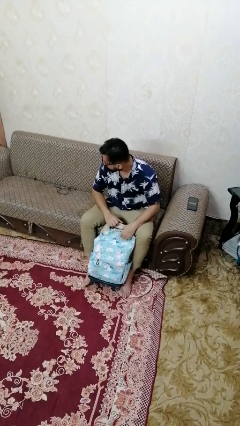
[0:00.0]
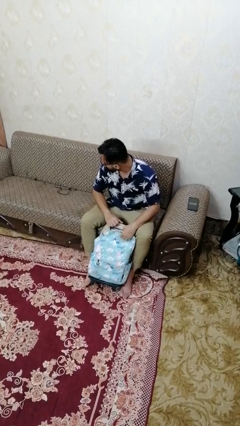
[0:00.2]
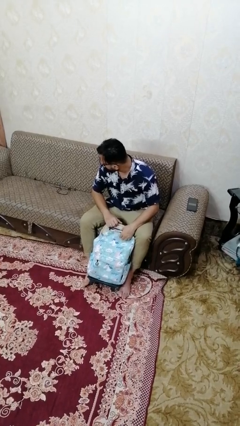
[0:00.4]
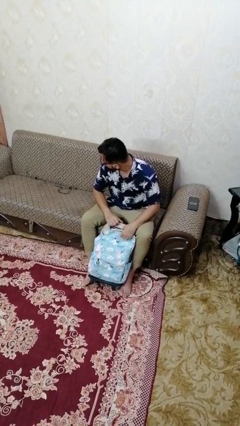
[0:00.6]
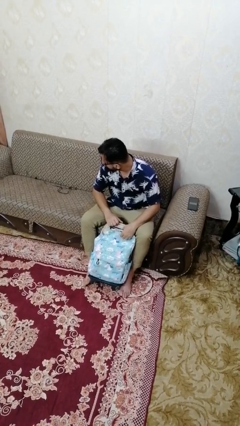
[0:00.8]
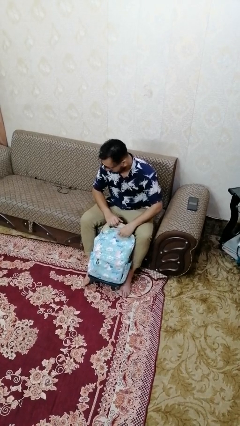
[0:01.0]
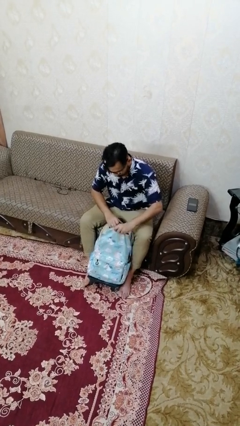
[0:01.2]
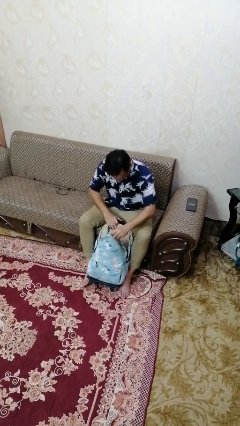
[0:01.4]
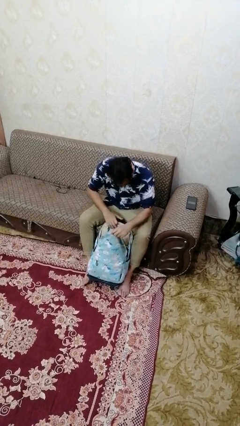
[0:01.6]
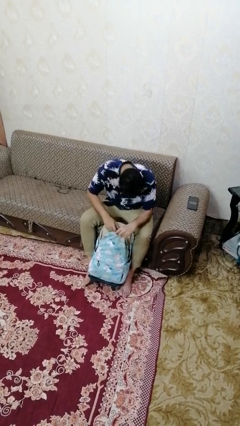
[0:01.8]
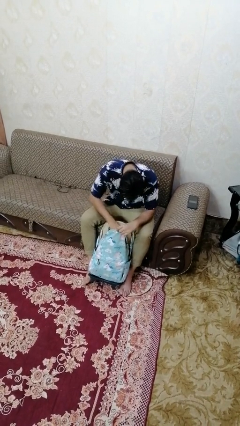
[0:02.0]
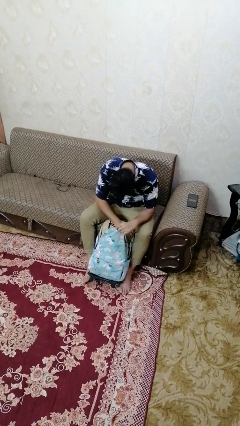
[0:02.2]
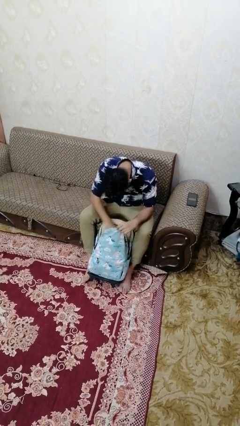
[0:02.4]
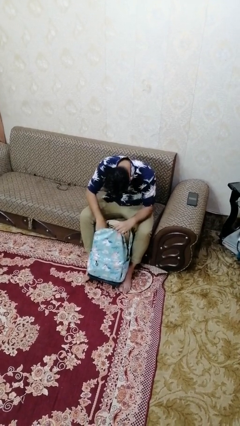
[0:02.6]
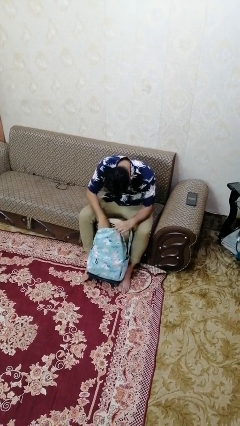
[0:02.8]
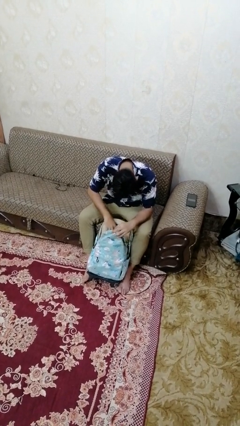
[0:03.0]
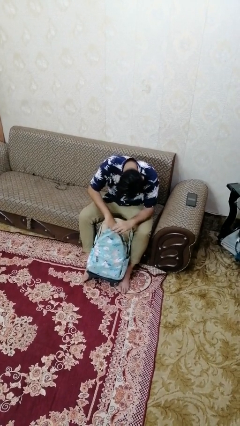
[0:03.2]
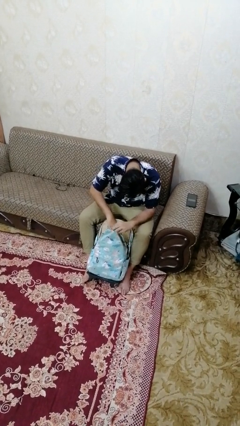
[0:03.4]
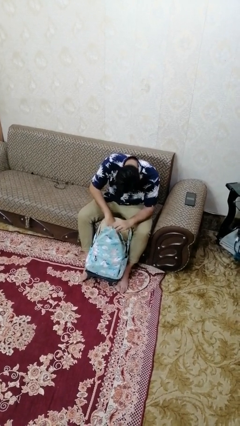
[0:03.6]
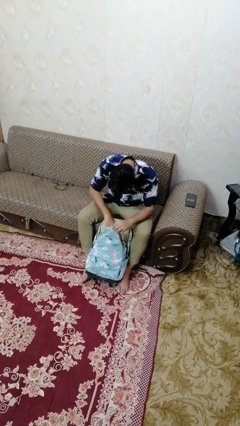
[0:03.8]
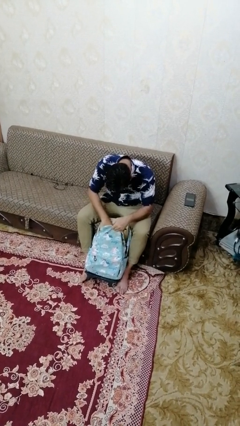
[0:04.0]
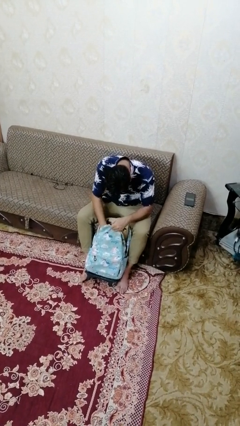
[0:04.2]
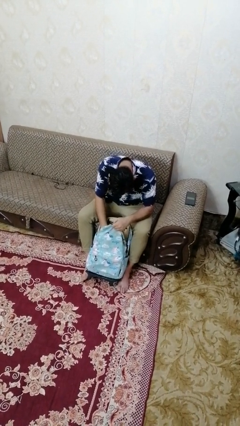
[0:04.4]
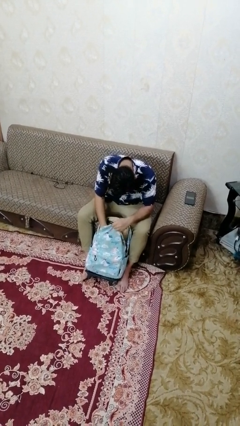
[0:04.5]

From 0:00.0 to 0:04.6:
person searches in backpack

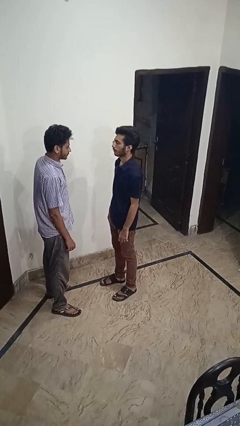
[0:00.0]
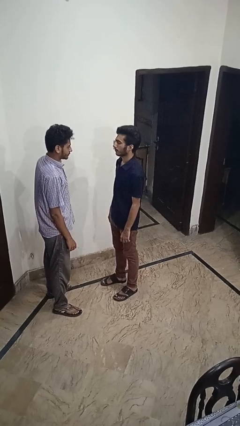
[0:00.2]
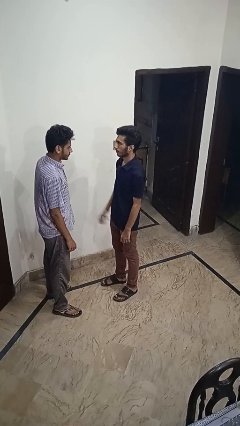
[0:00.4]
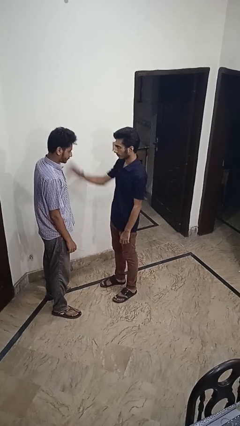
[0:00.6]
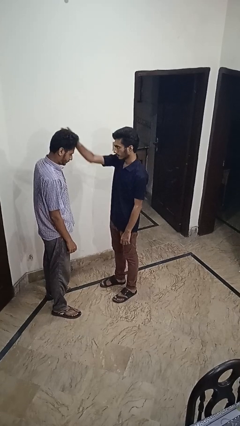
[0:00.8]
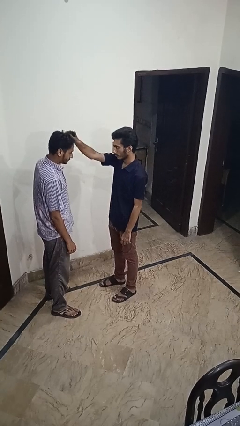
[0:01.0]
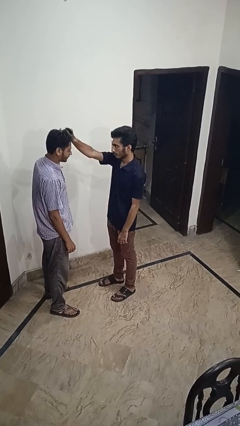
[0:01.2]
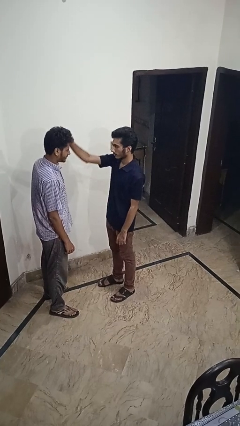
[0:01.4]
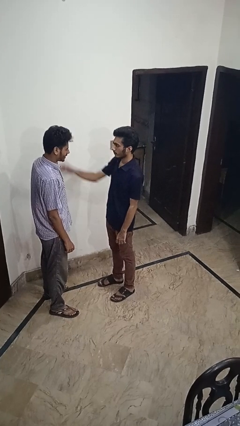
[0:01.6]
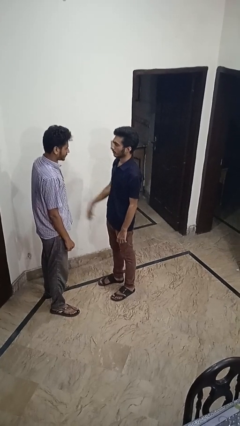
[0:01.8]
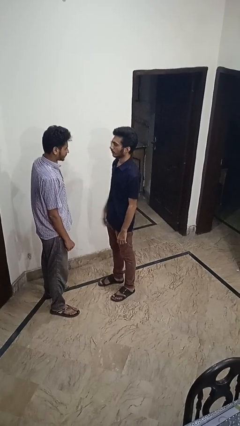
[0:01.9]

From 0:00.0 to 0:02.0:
person grabs person by hair

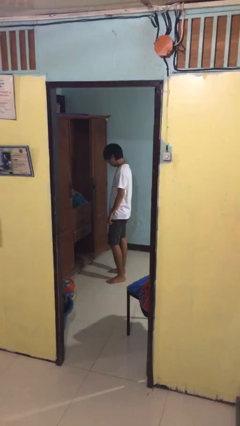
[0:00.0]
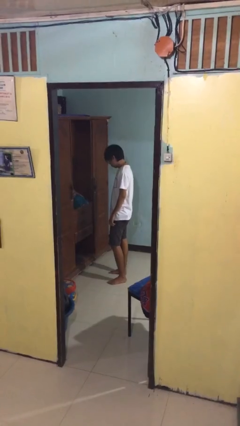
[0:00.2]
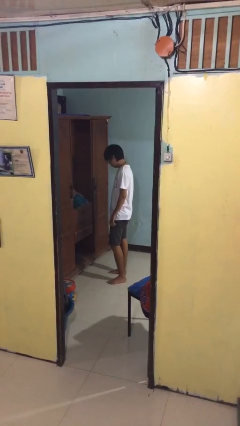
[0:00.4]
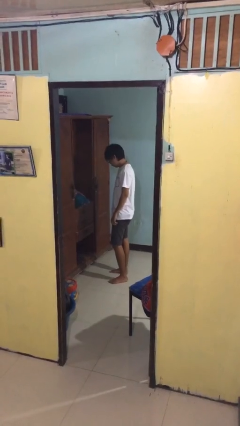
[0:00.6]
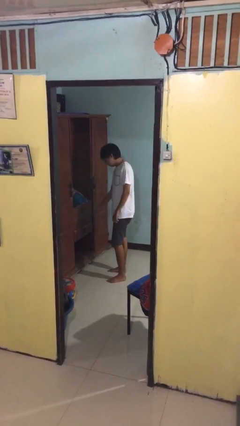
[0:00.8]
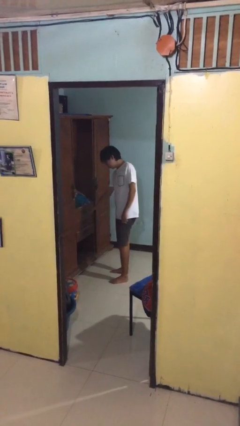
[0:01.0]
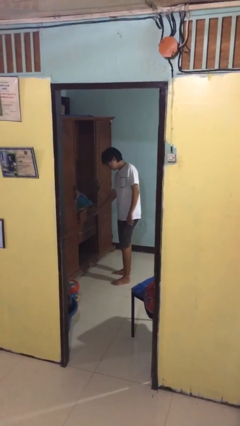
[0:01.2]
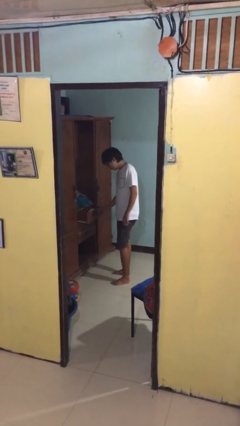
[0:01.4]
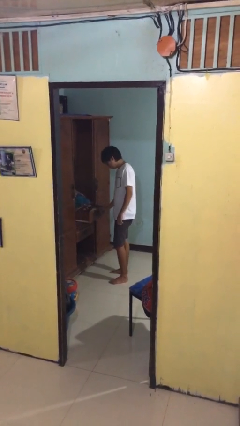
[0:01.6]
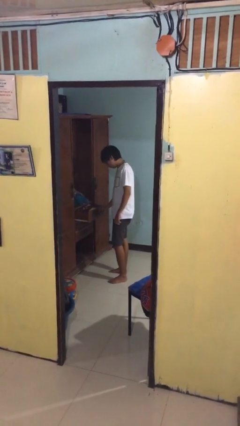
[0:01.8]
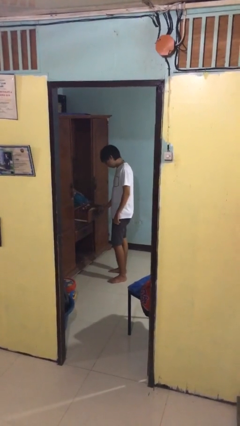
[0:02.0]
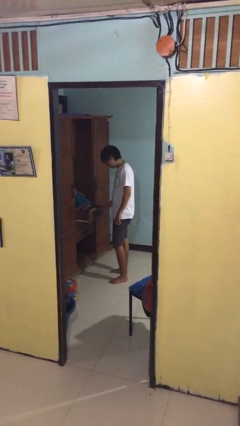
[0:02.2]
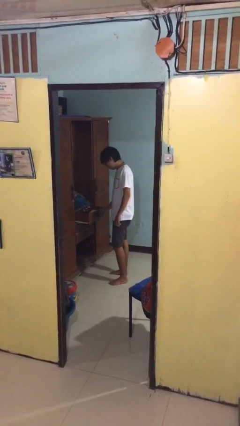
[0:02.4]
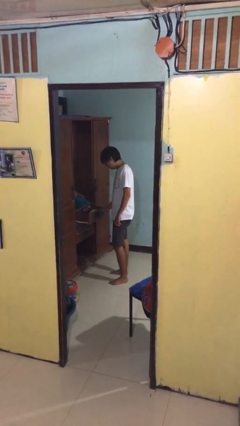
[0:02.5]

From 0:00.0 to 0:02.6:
person opens dresser drawer

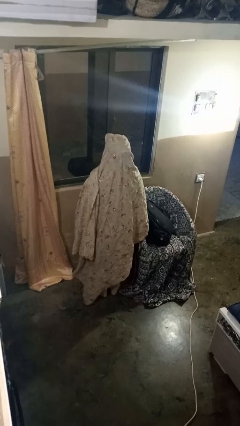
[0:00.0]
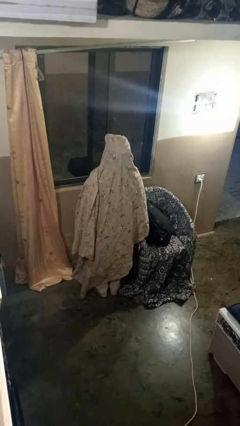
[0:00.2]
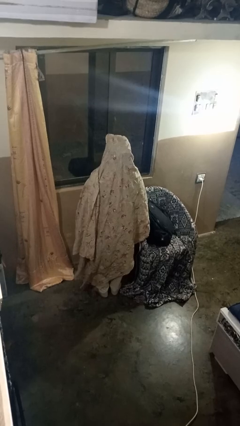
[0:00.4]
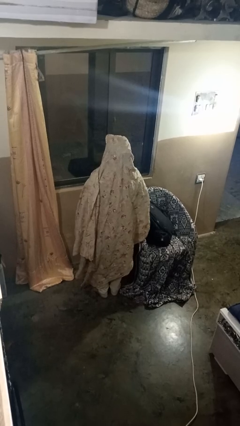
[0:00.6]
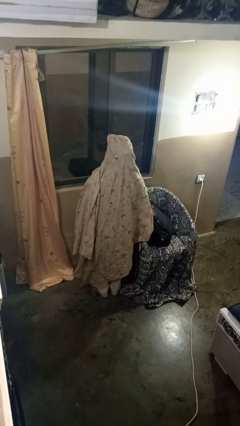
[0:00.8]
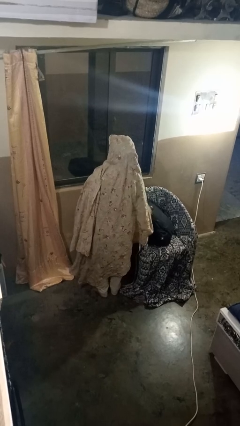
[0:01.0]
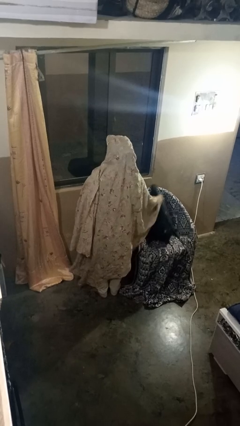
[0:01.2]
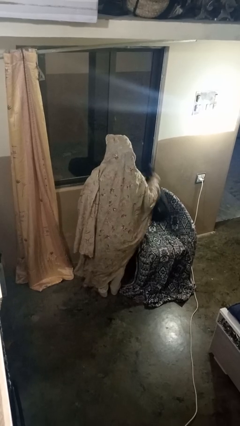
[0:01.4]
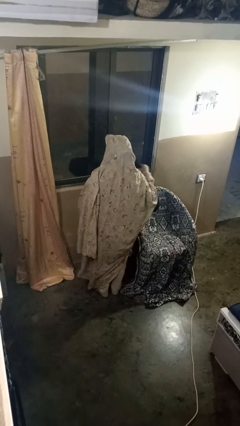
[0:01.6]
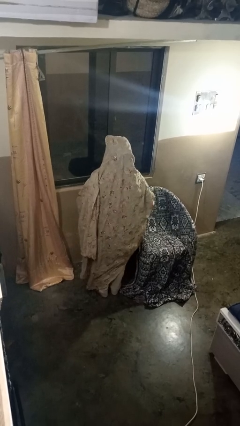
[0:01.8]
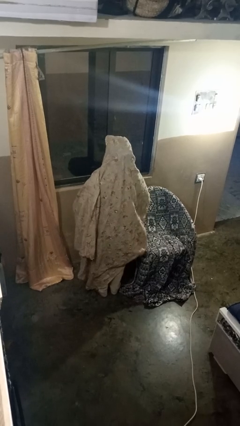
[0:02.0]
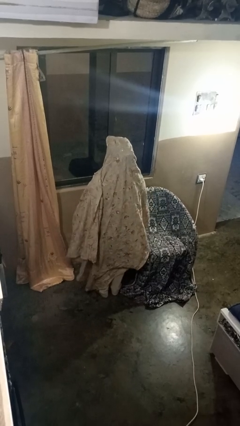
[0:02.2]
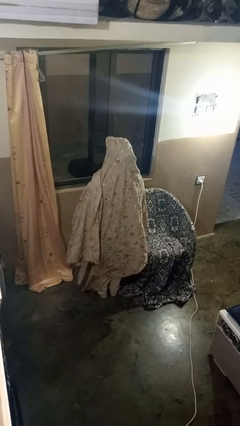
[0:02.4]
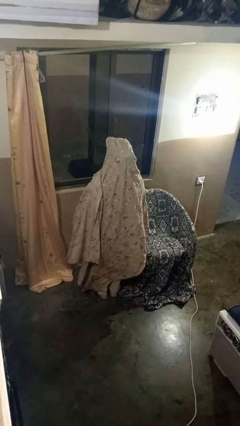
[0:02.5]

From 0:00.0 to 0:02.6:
person picks up object from couch

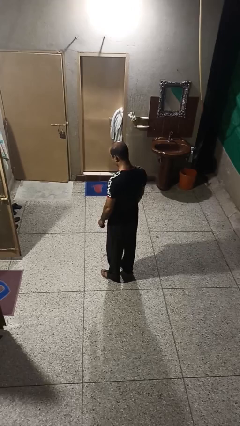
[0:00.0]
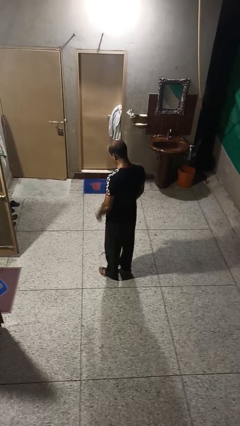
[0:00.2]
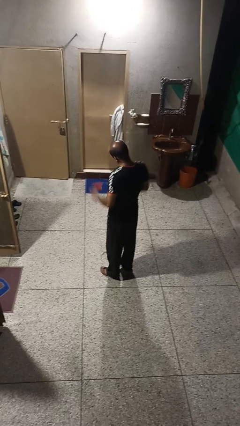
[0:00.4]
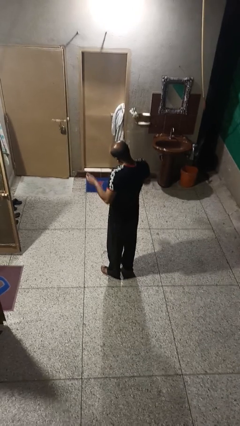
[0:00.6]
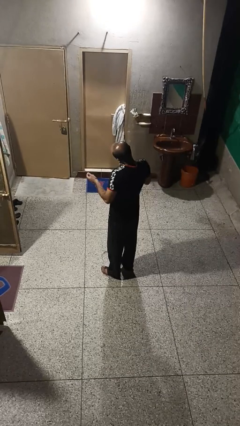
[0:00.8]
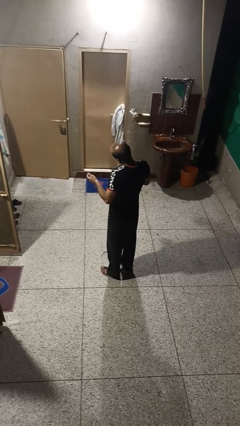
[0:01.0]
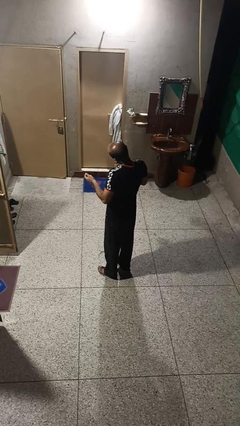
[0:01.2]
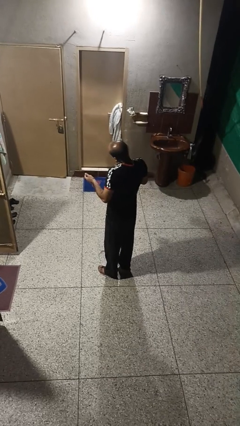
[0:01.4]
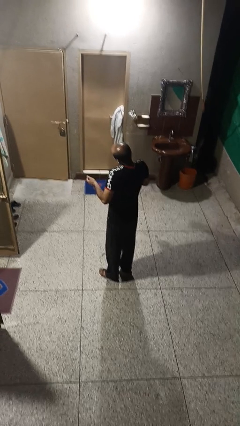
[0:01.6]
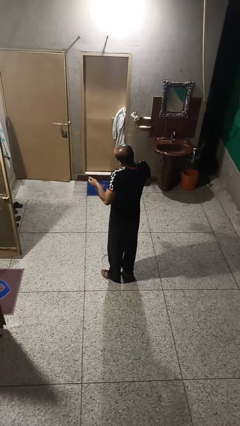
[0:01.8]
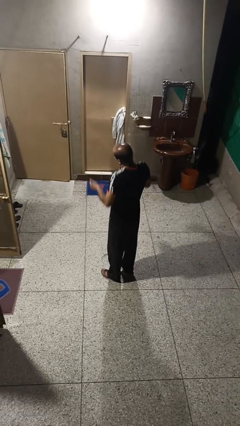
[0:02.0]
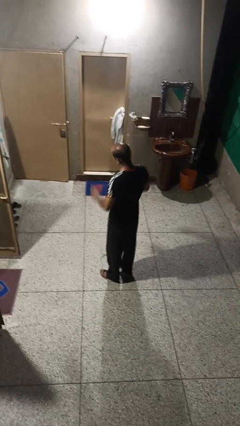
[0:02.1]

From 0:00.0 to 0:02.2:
person shrugs

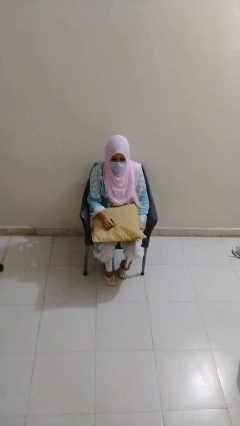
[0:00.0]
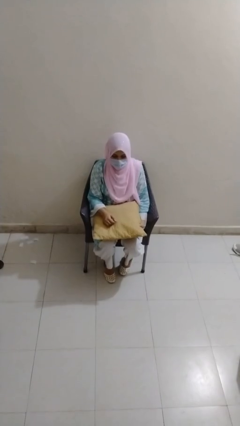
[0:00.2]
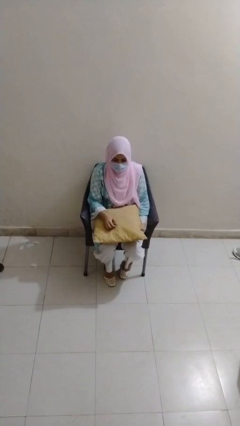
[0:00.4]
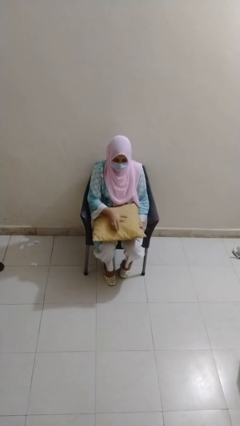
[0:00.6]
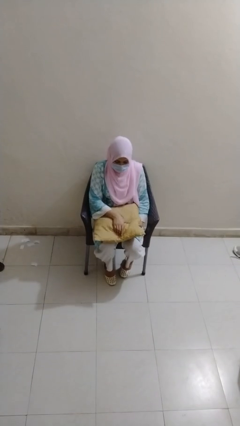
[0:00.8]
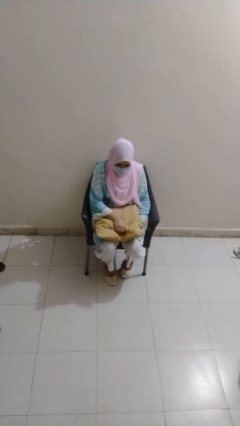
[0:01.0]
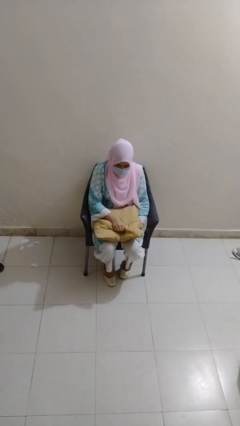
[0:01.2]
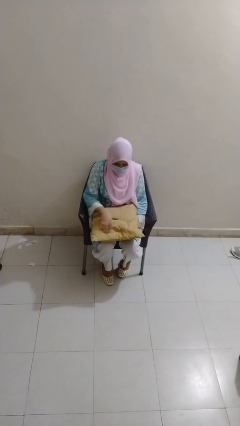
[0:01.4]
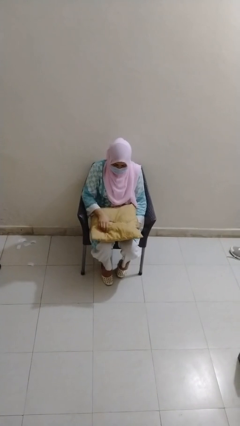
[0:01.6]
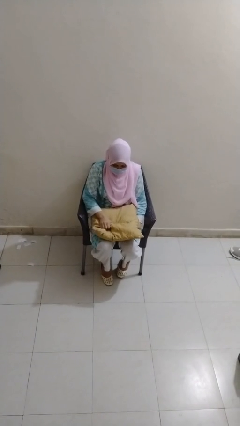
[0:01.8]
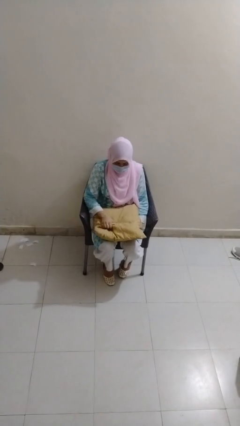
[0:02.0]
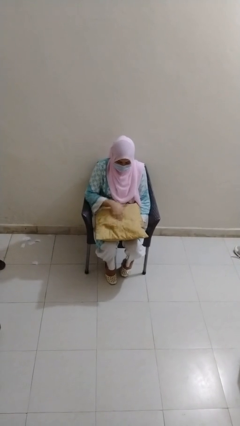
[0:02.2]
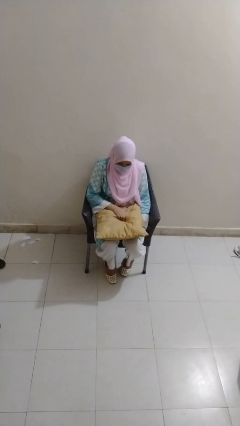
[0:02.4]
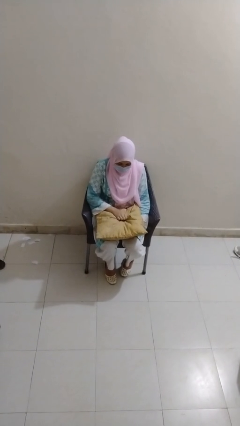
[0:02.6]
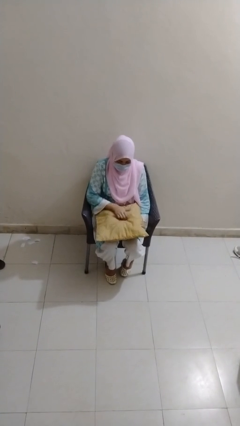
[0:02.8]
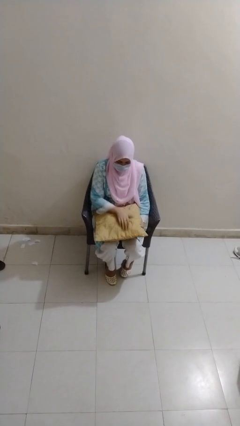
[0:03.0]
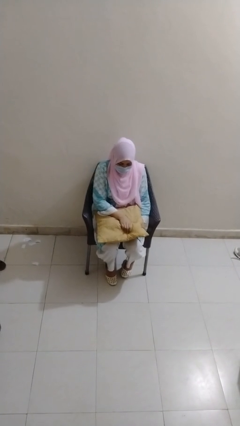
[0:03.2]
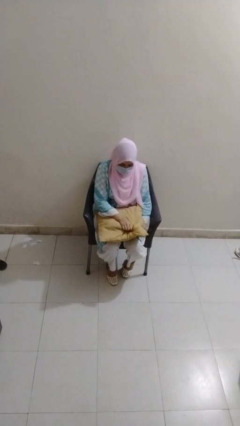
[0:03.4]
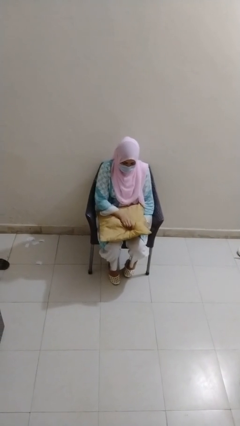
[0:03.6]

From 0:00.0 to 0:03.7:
person squeezes object
